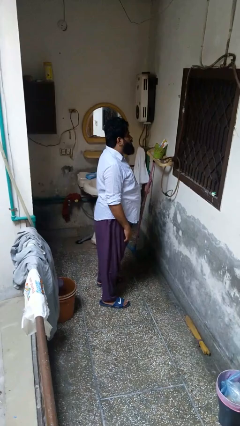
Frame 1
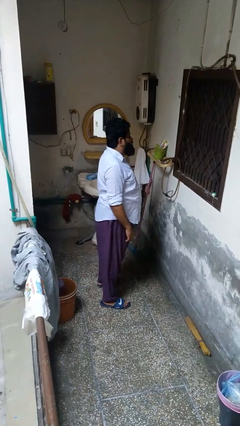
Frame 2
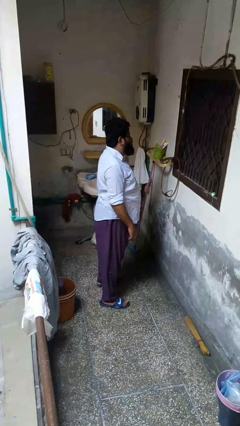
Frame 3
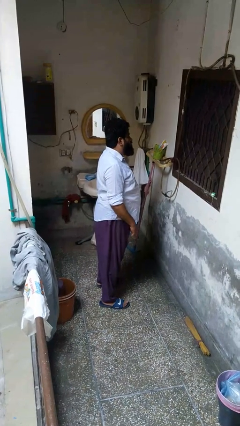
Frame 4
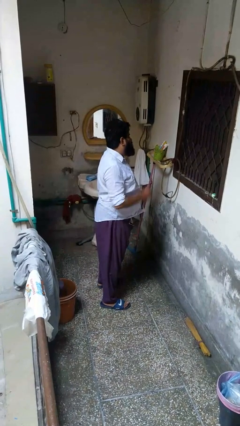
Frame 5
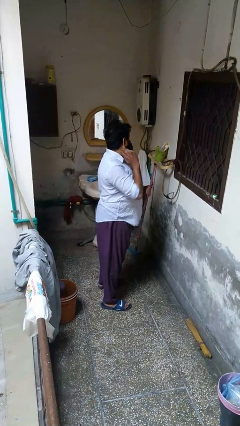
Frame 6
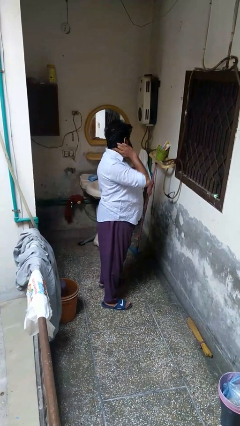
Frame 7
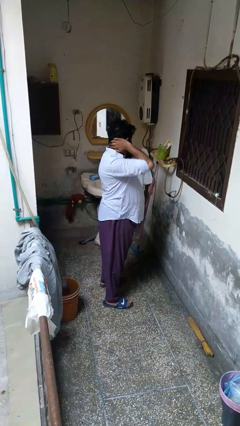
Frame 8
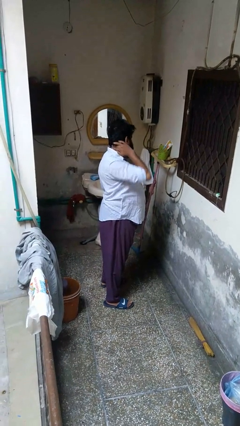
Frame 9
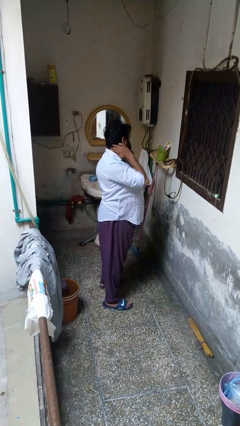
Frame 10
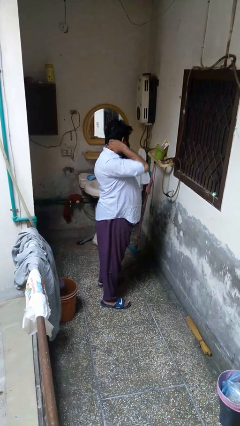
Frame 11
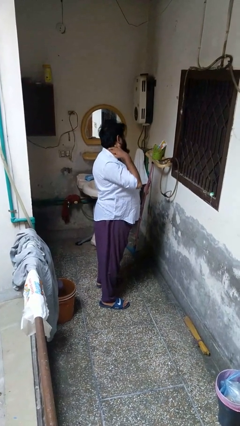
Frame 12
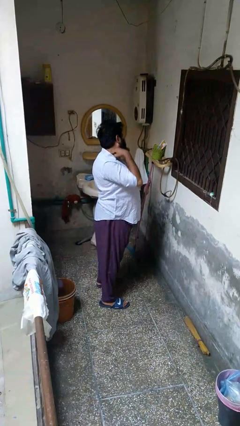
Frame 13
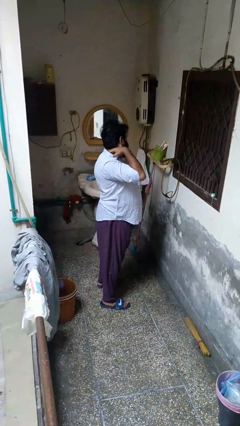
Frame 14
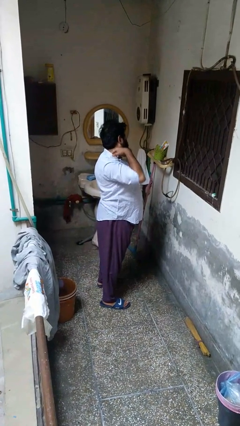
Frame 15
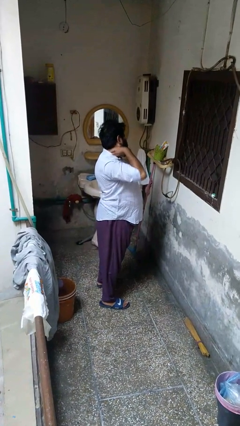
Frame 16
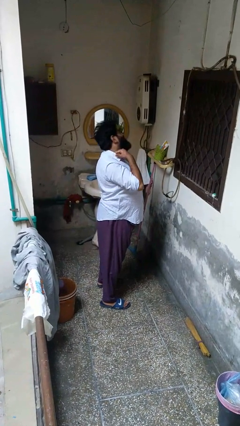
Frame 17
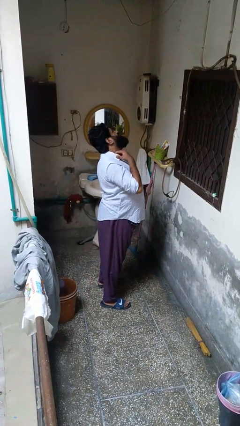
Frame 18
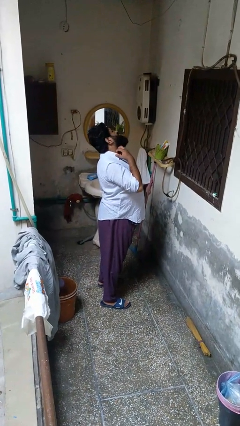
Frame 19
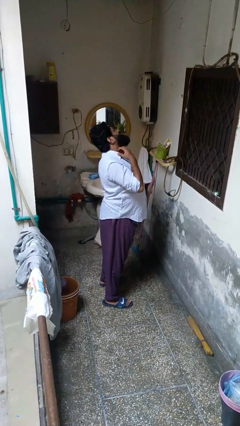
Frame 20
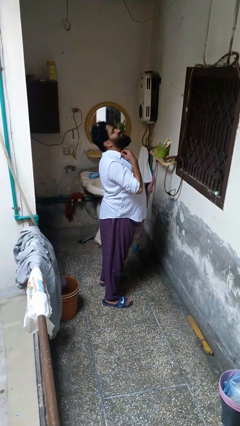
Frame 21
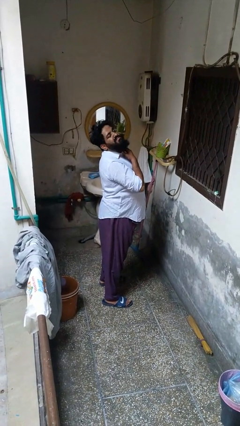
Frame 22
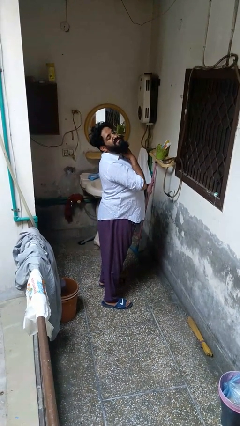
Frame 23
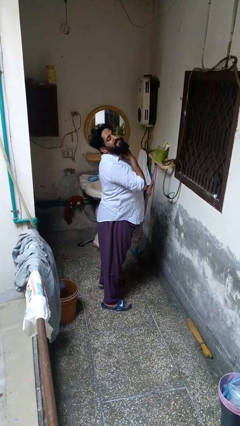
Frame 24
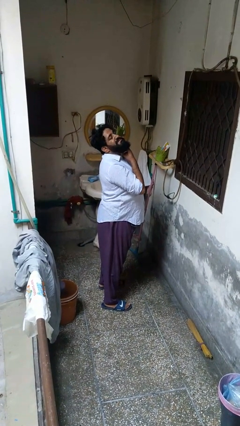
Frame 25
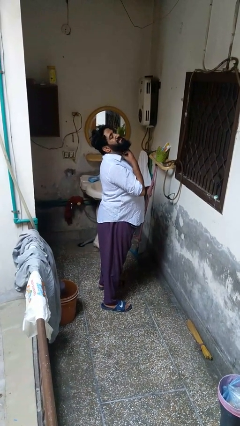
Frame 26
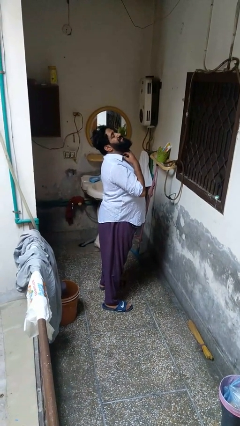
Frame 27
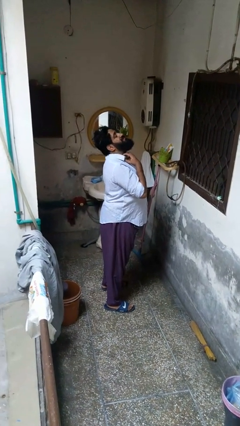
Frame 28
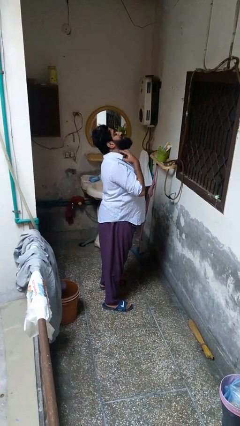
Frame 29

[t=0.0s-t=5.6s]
person rubs neck

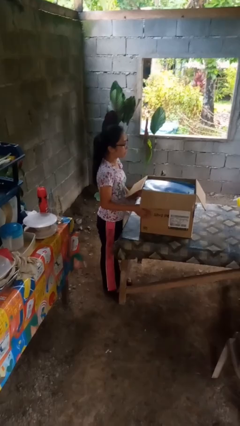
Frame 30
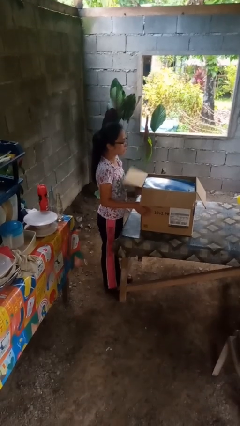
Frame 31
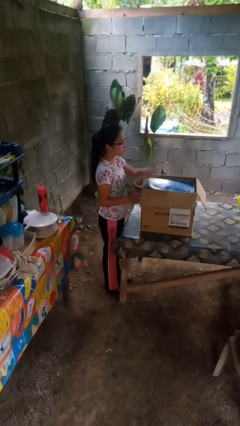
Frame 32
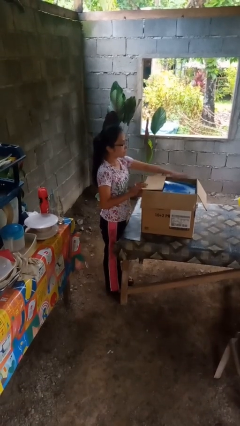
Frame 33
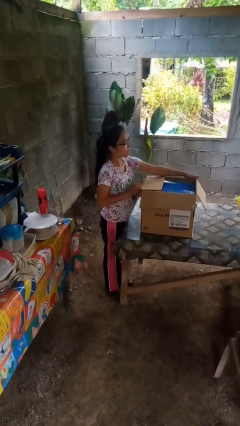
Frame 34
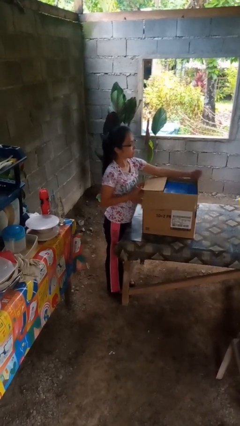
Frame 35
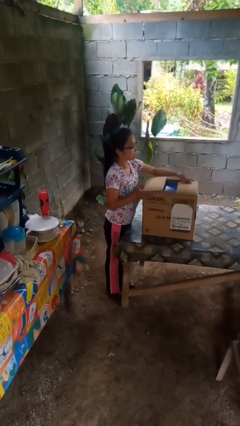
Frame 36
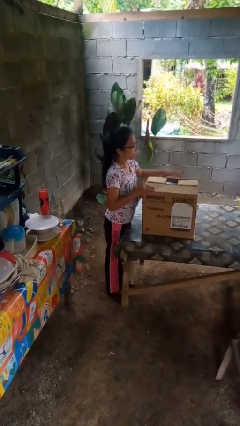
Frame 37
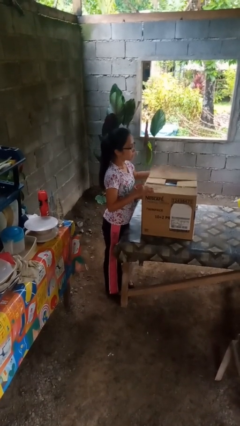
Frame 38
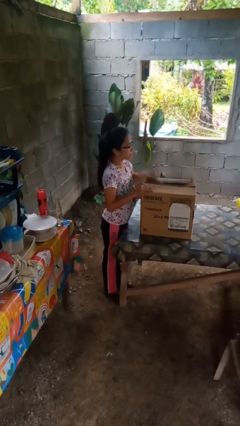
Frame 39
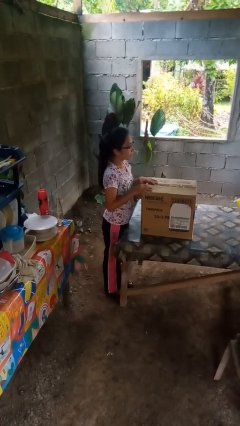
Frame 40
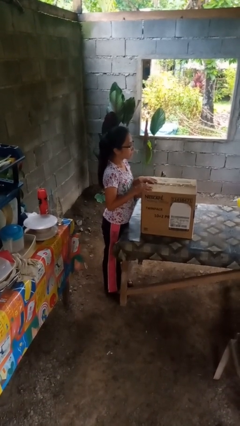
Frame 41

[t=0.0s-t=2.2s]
person closes box

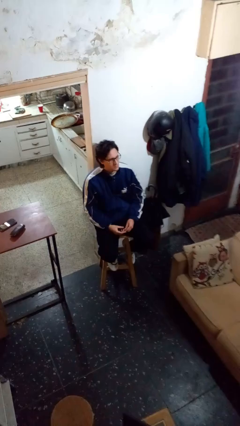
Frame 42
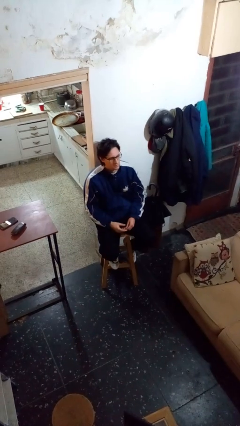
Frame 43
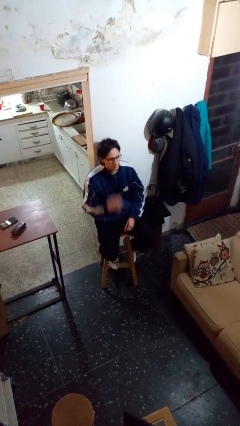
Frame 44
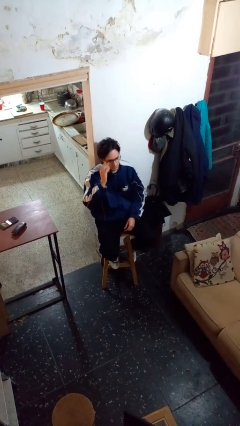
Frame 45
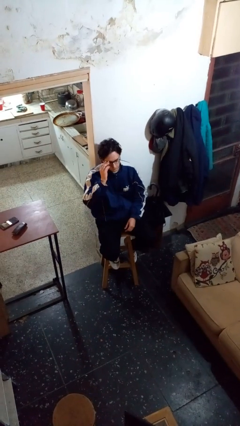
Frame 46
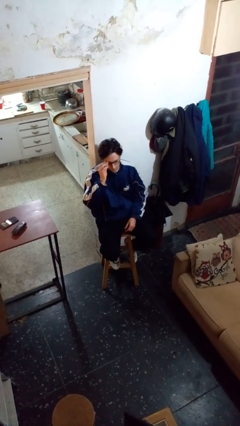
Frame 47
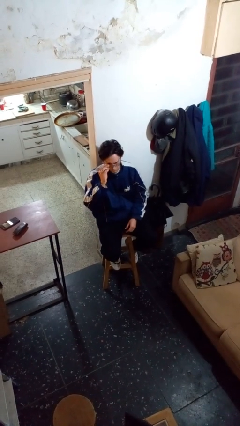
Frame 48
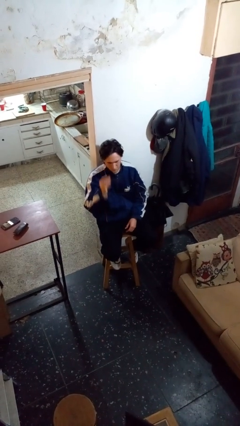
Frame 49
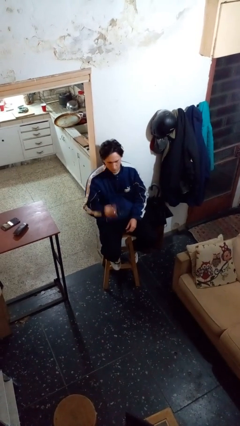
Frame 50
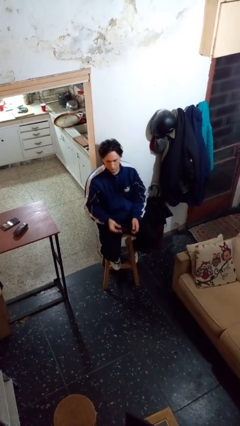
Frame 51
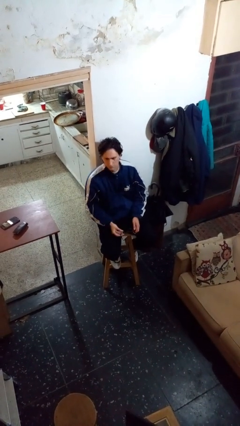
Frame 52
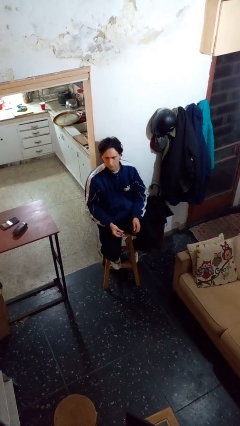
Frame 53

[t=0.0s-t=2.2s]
person takes off glasses

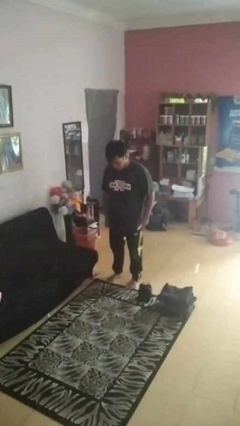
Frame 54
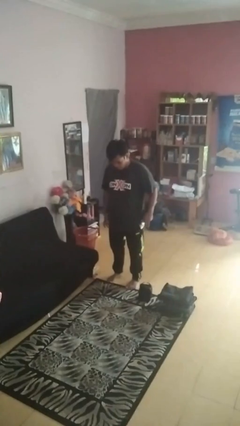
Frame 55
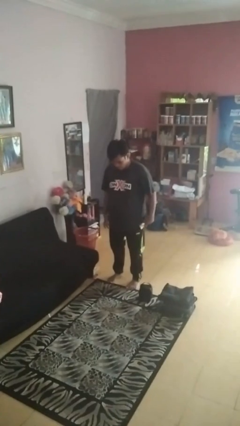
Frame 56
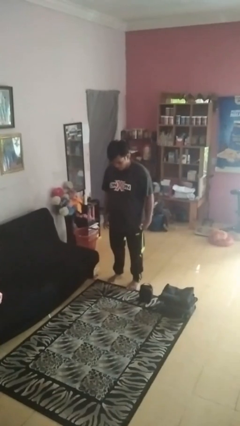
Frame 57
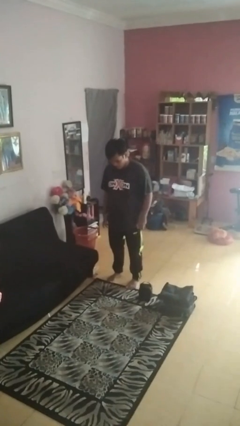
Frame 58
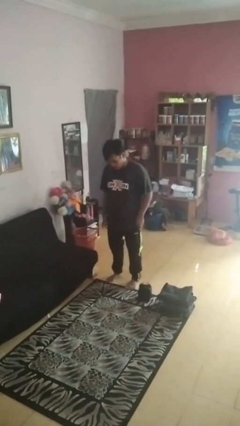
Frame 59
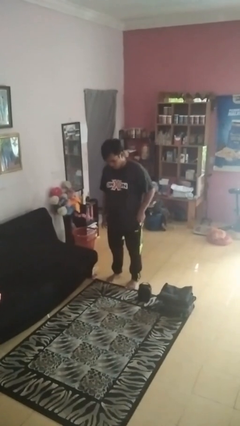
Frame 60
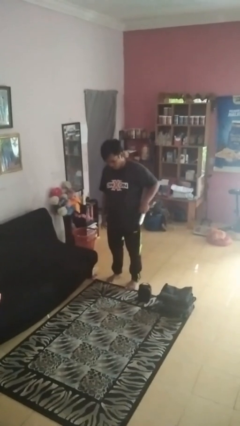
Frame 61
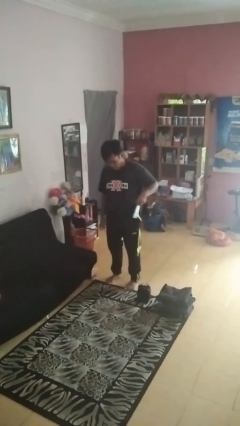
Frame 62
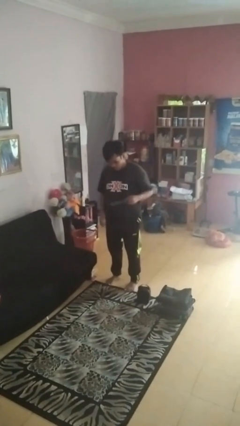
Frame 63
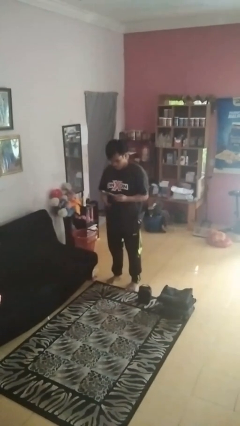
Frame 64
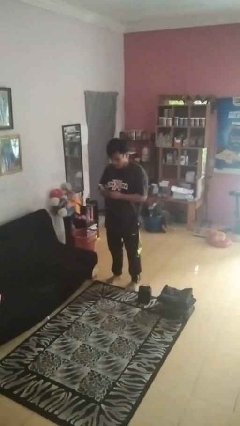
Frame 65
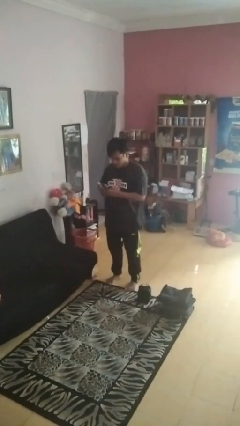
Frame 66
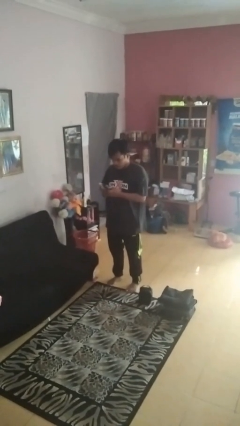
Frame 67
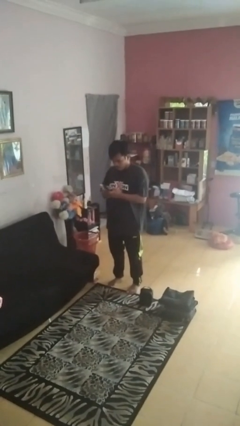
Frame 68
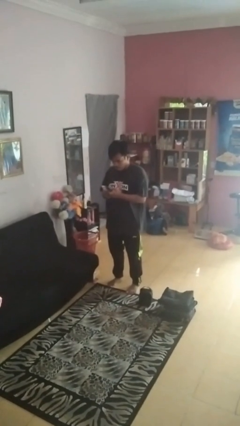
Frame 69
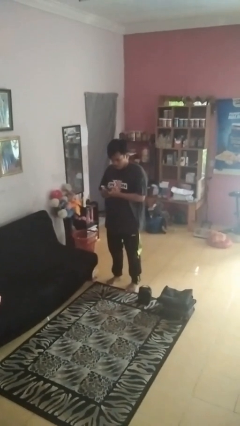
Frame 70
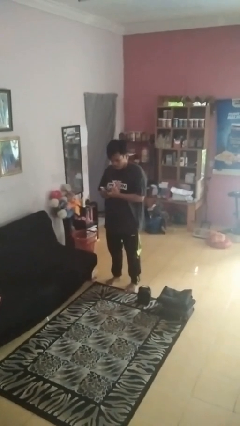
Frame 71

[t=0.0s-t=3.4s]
person takes phone from pocket

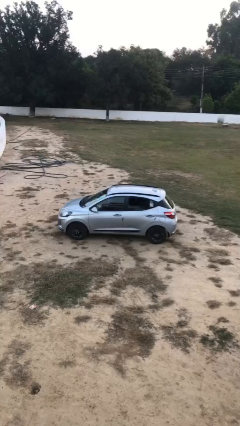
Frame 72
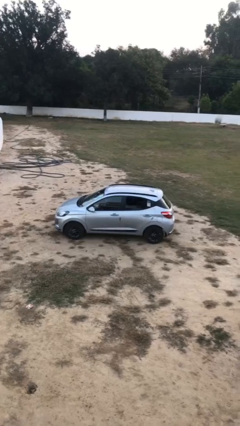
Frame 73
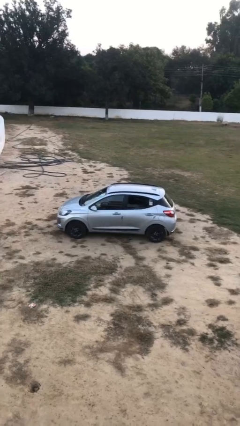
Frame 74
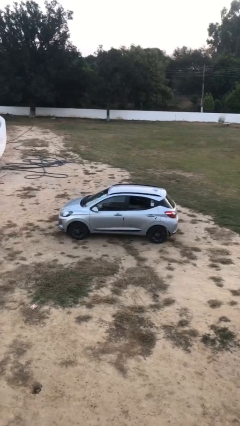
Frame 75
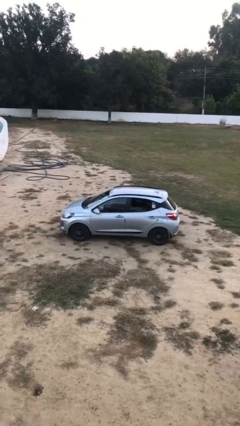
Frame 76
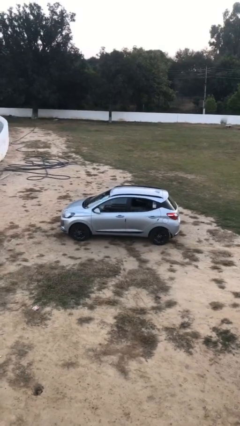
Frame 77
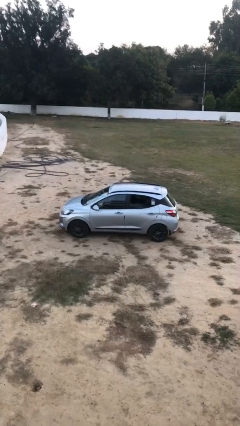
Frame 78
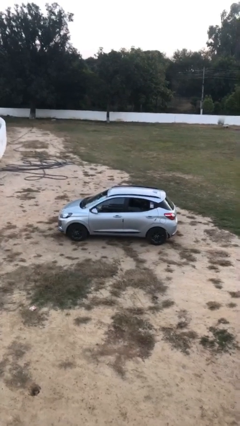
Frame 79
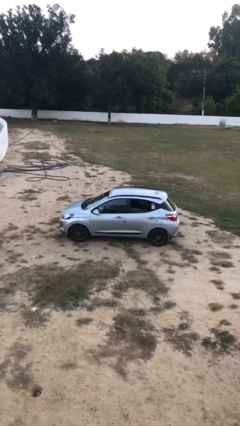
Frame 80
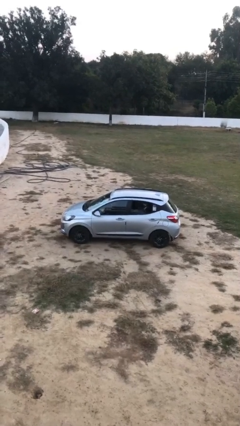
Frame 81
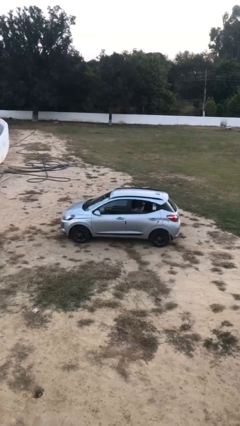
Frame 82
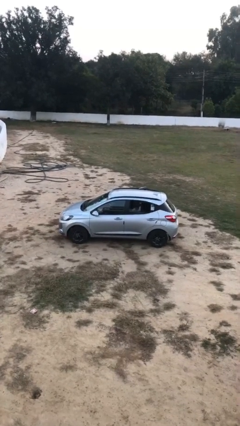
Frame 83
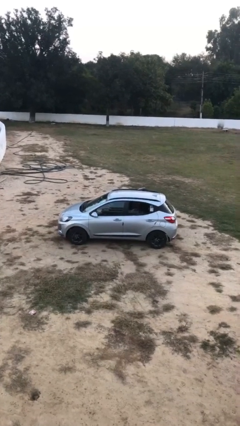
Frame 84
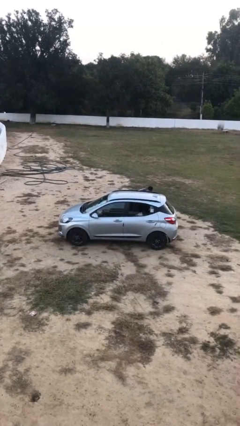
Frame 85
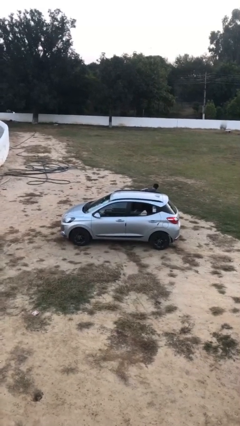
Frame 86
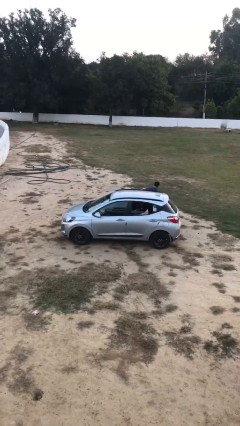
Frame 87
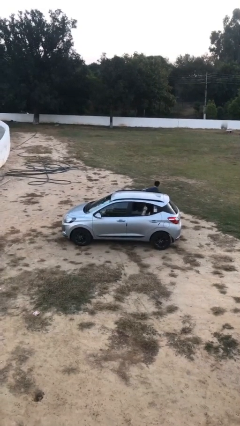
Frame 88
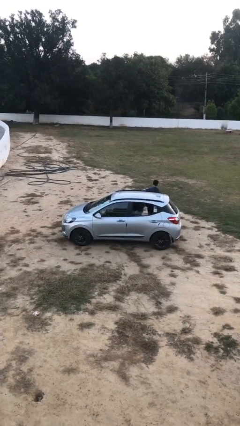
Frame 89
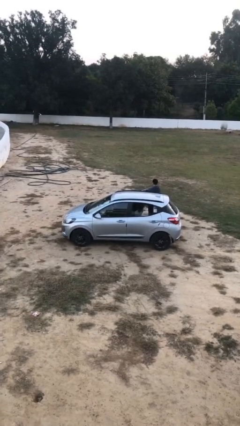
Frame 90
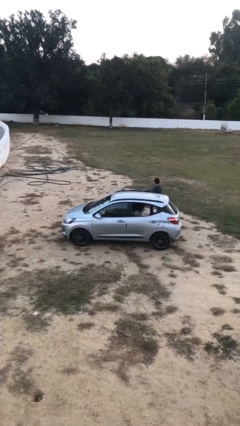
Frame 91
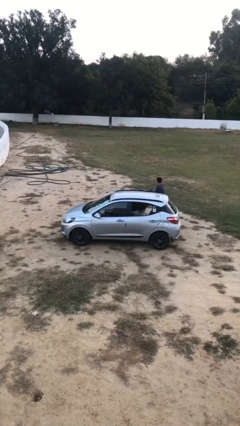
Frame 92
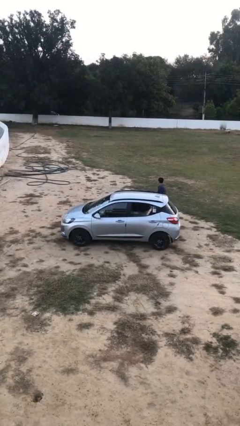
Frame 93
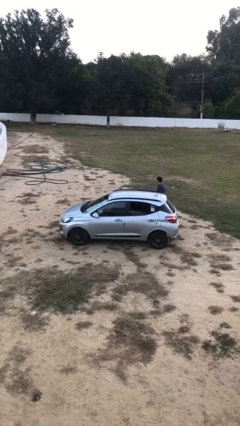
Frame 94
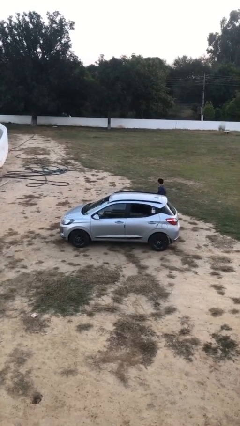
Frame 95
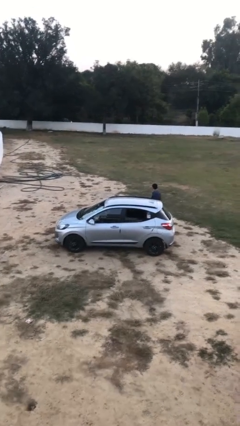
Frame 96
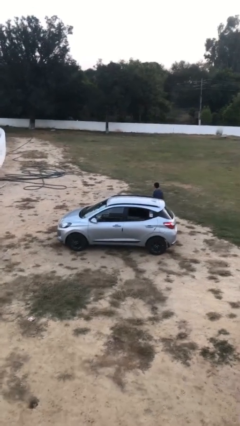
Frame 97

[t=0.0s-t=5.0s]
car drops off person
